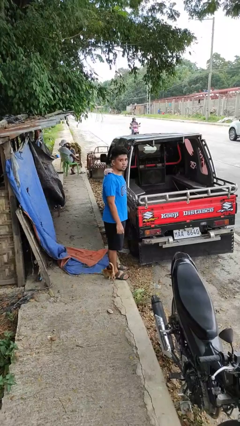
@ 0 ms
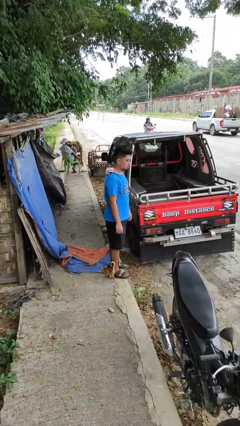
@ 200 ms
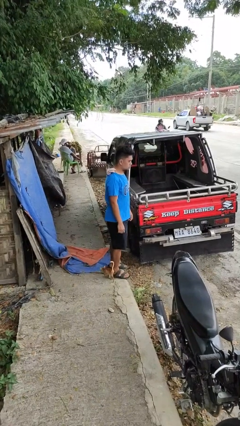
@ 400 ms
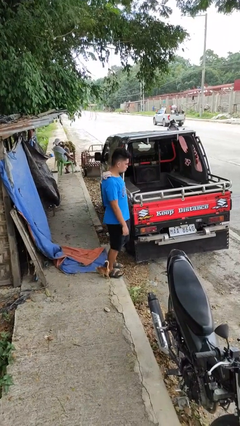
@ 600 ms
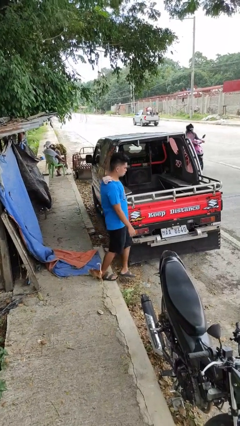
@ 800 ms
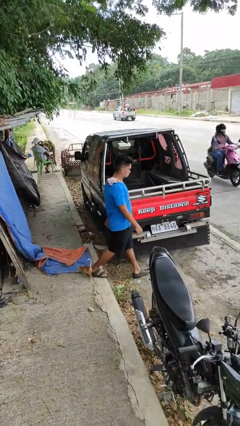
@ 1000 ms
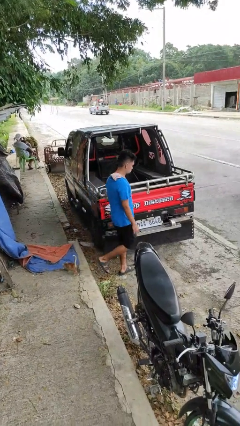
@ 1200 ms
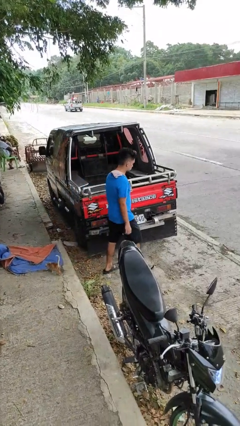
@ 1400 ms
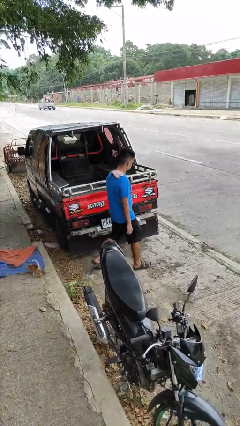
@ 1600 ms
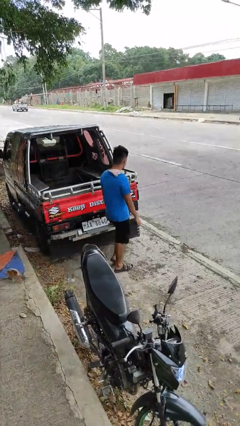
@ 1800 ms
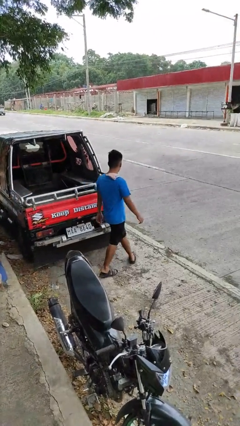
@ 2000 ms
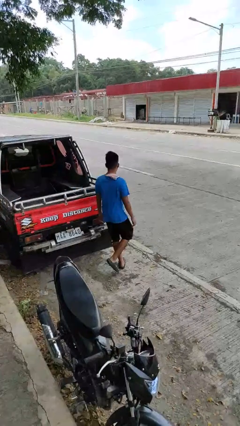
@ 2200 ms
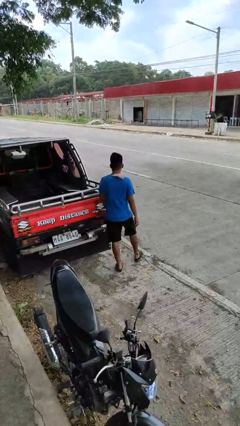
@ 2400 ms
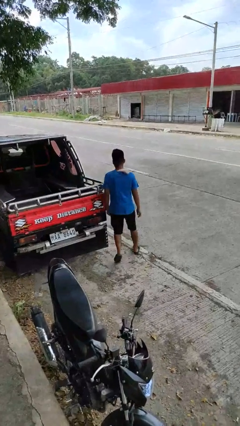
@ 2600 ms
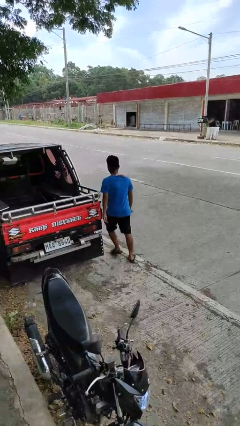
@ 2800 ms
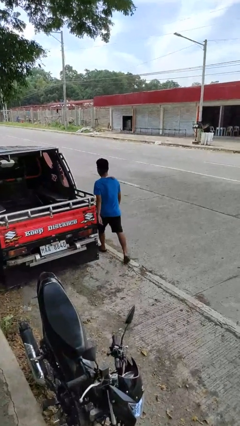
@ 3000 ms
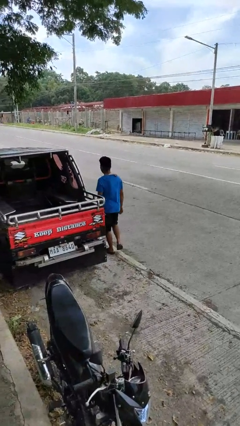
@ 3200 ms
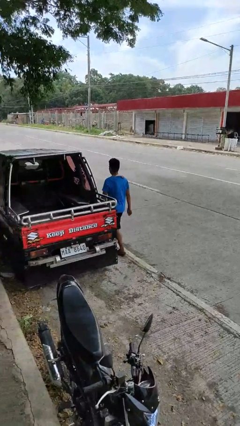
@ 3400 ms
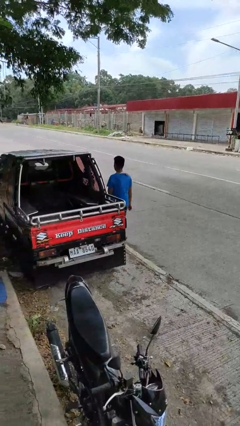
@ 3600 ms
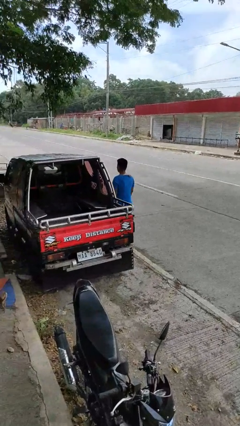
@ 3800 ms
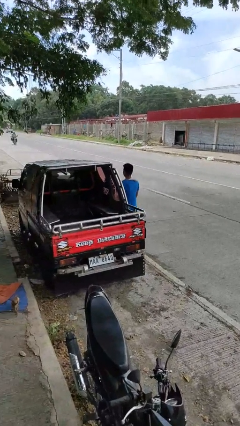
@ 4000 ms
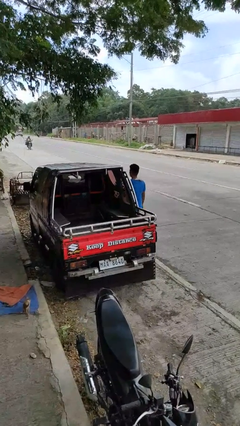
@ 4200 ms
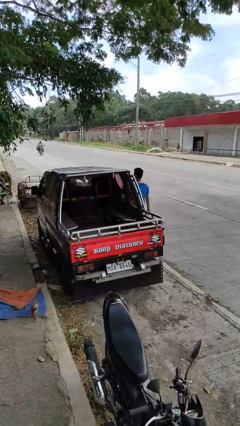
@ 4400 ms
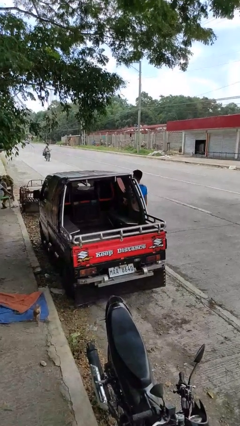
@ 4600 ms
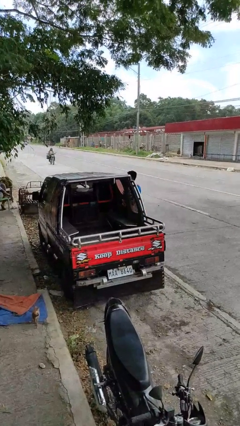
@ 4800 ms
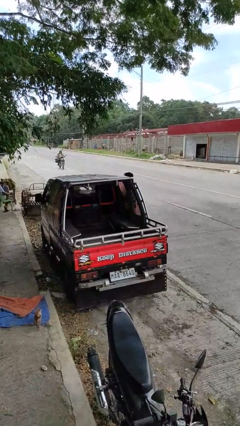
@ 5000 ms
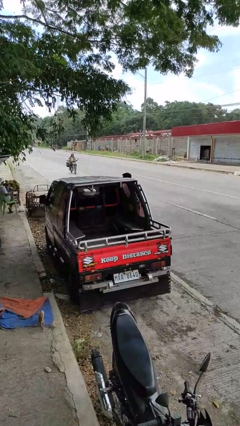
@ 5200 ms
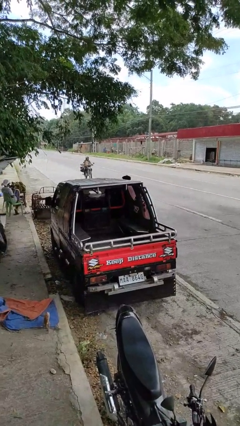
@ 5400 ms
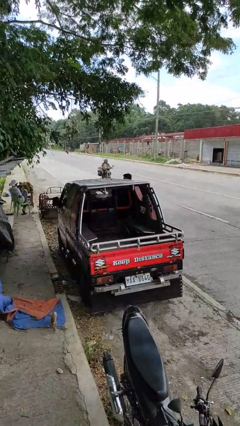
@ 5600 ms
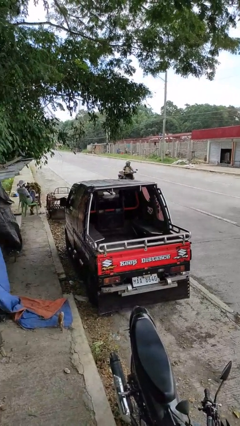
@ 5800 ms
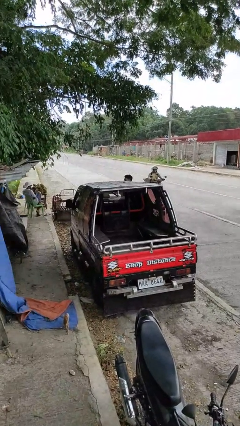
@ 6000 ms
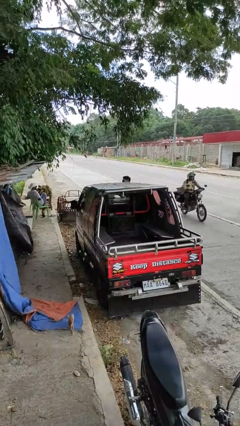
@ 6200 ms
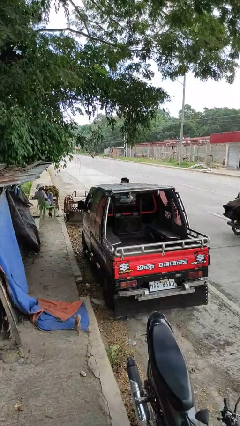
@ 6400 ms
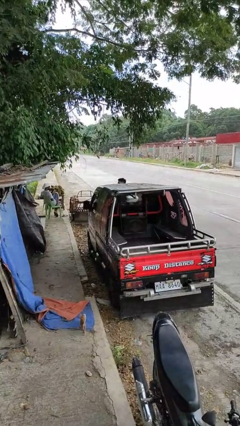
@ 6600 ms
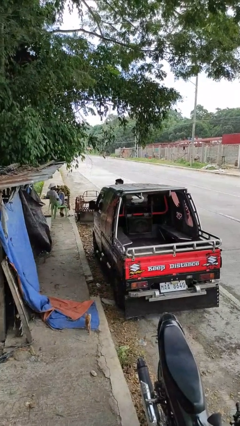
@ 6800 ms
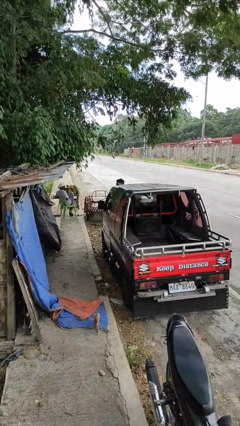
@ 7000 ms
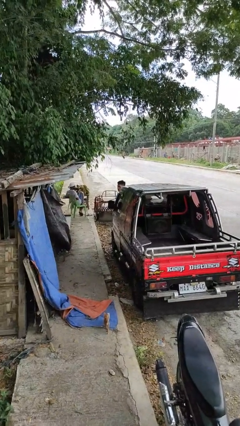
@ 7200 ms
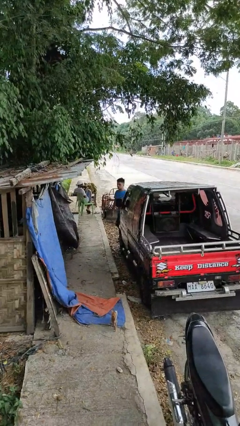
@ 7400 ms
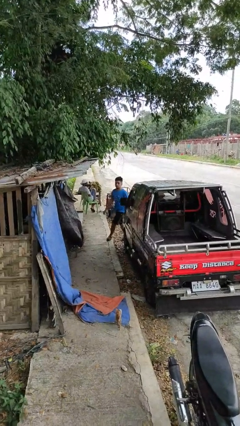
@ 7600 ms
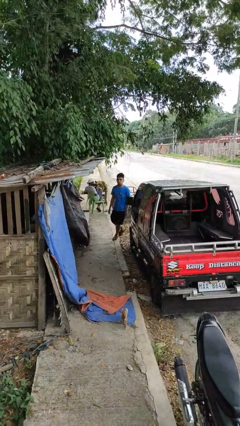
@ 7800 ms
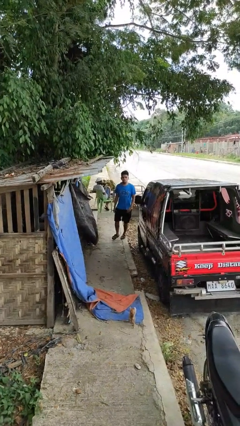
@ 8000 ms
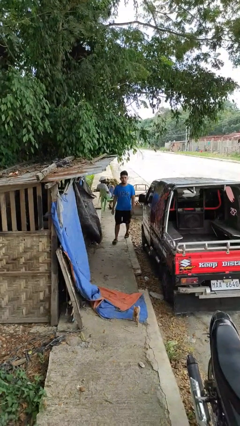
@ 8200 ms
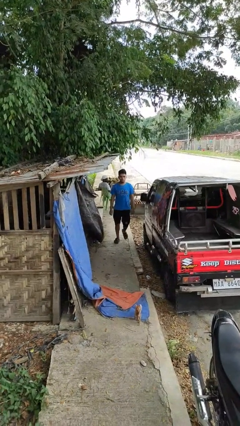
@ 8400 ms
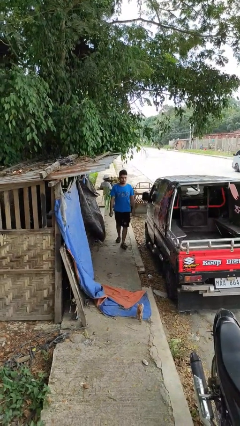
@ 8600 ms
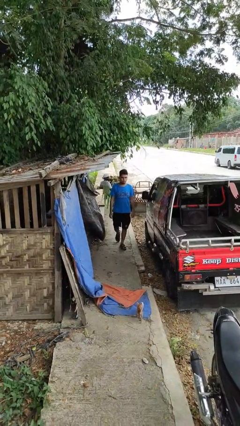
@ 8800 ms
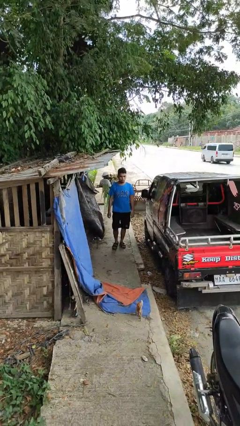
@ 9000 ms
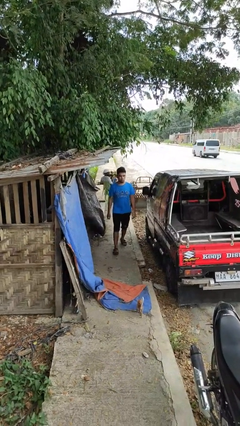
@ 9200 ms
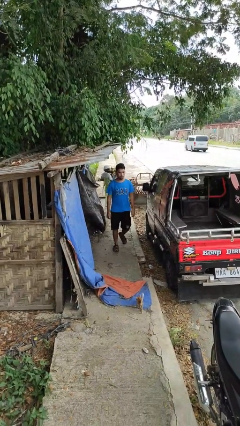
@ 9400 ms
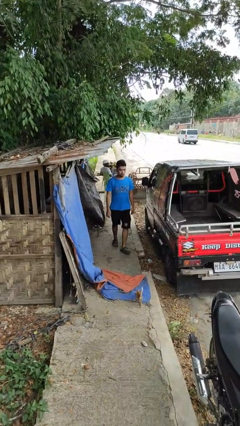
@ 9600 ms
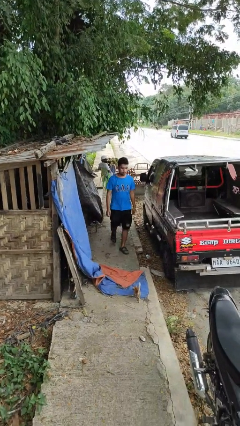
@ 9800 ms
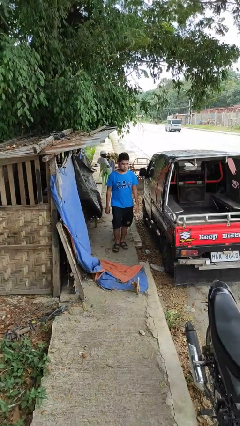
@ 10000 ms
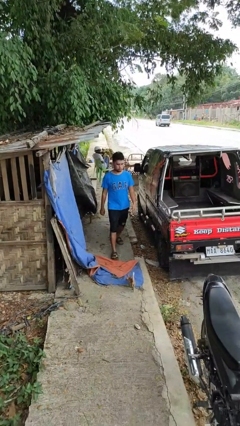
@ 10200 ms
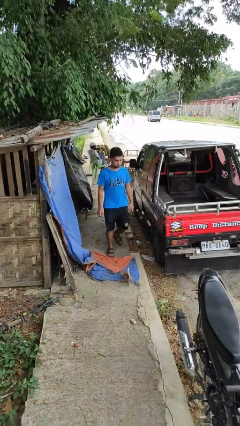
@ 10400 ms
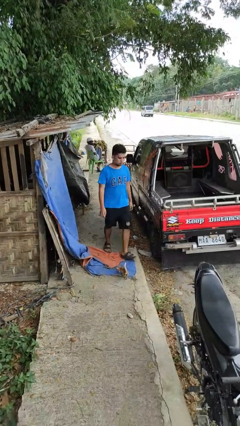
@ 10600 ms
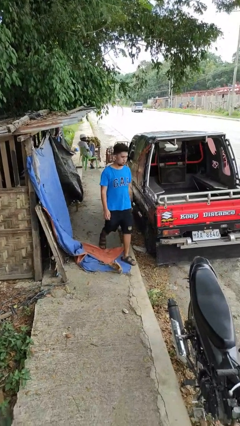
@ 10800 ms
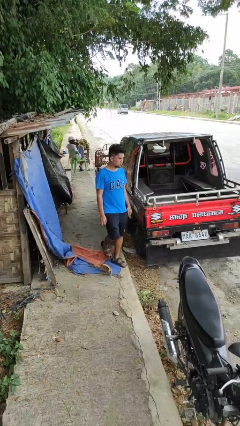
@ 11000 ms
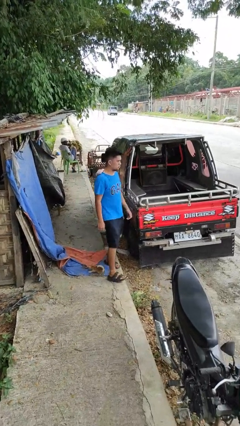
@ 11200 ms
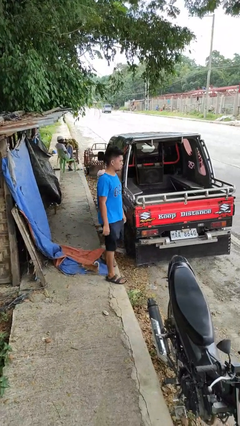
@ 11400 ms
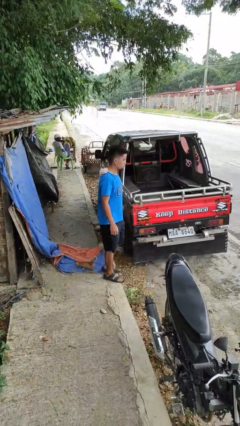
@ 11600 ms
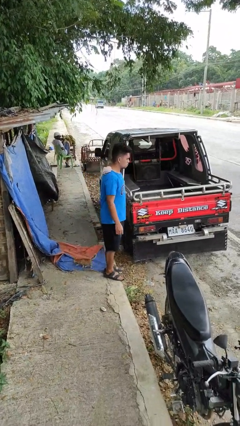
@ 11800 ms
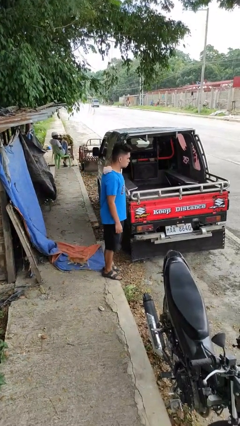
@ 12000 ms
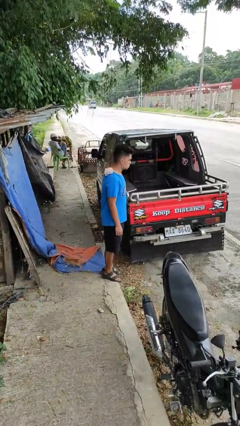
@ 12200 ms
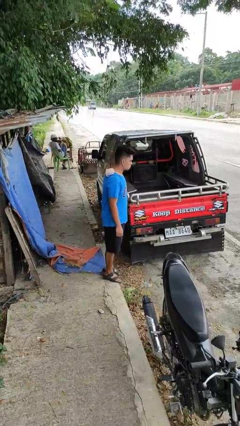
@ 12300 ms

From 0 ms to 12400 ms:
person walks around car

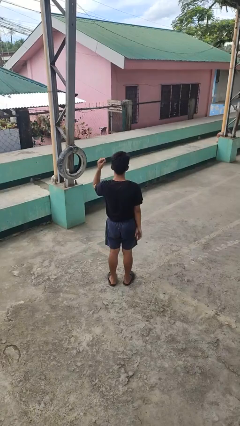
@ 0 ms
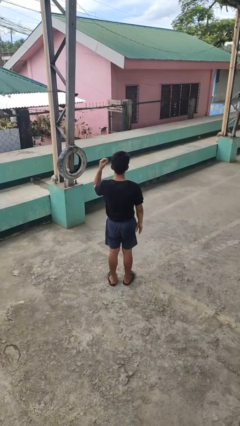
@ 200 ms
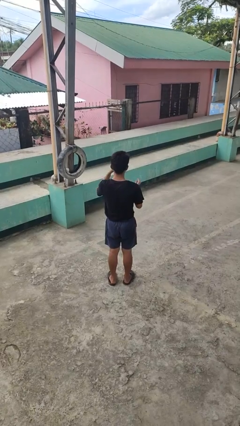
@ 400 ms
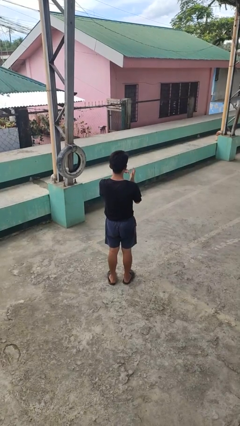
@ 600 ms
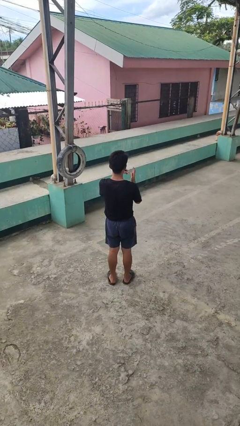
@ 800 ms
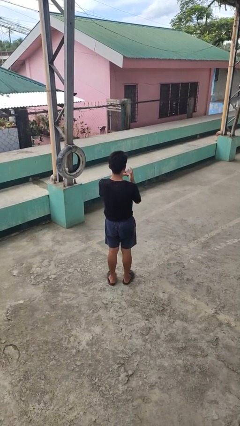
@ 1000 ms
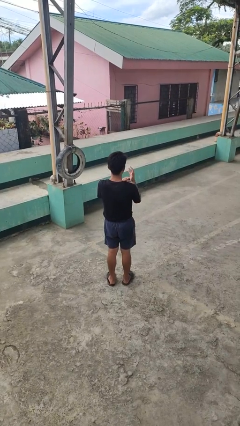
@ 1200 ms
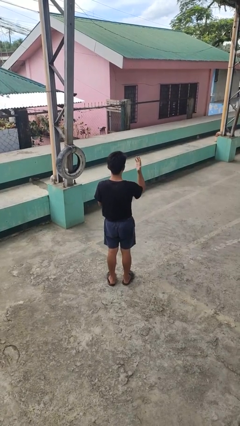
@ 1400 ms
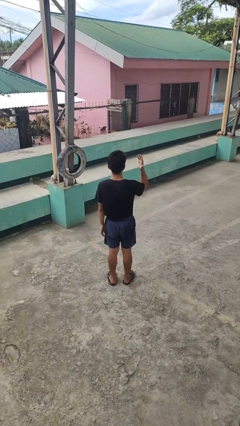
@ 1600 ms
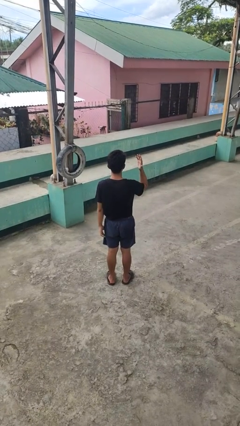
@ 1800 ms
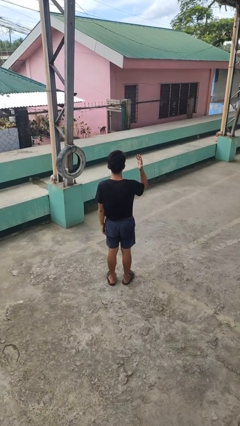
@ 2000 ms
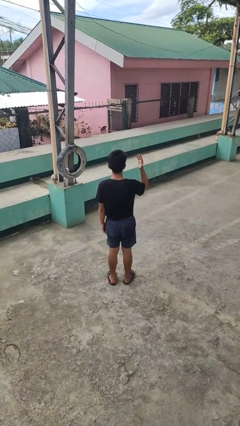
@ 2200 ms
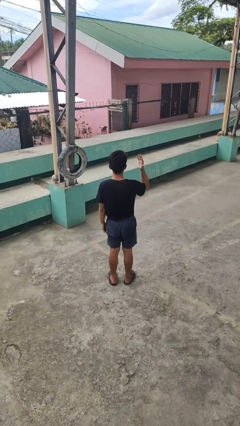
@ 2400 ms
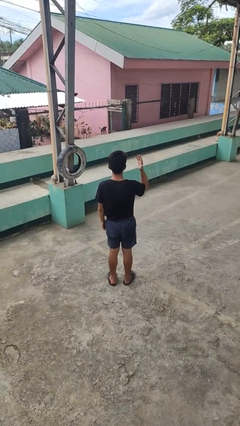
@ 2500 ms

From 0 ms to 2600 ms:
person puts on ring

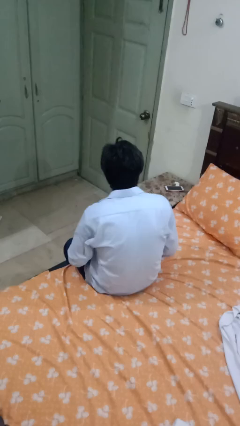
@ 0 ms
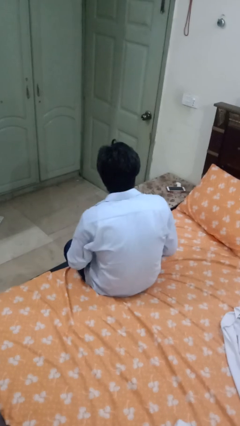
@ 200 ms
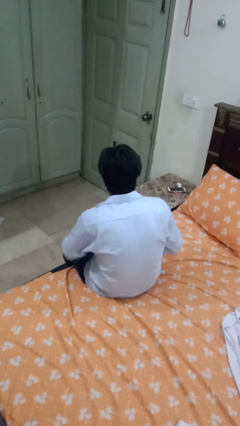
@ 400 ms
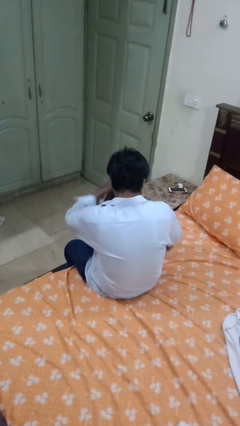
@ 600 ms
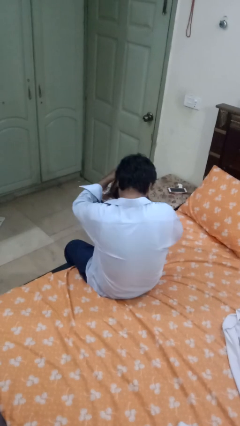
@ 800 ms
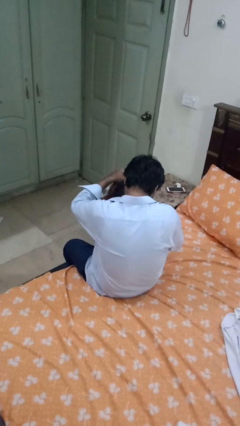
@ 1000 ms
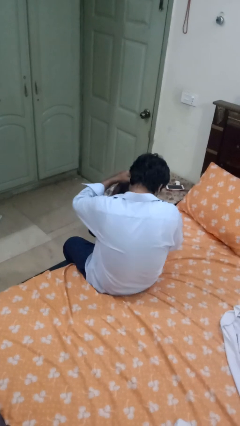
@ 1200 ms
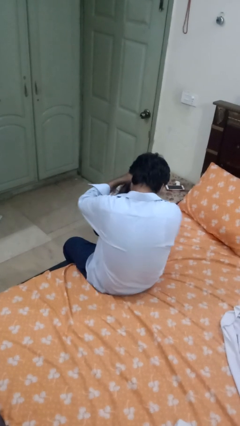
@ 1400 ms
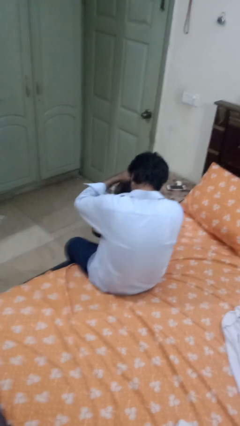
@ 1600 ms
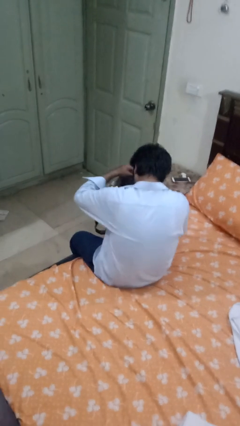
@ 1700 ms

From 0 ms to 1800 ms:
person searches in bag

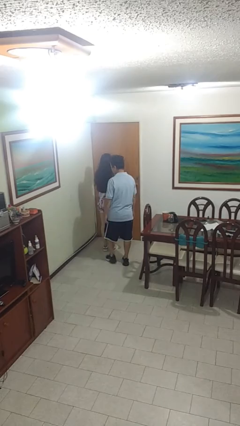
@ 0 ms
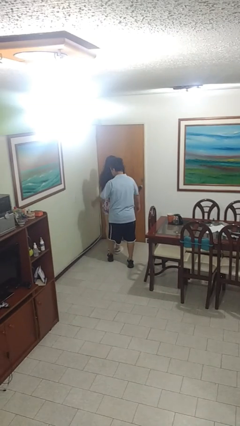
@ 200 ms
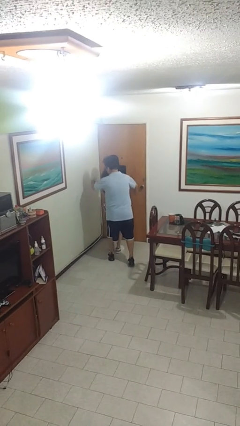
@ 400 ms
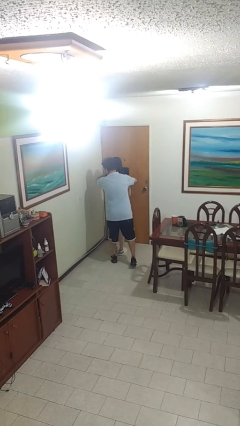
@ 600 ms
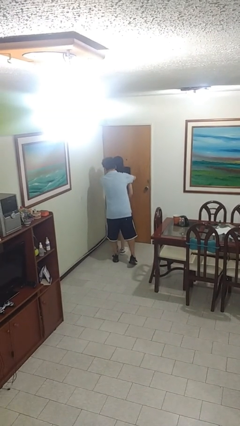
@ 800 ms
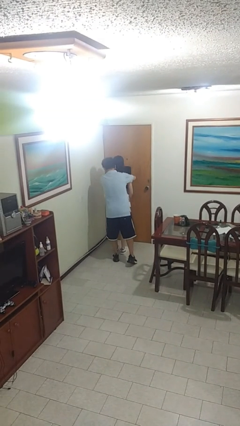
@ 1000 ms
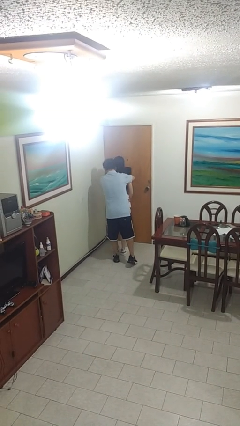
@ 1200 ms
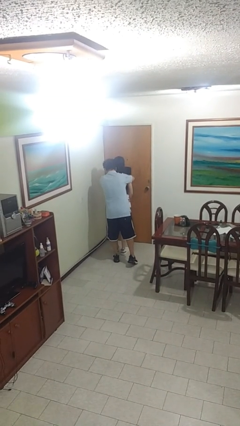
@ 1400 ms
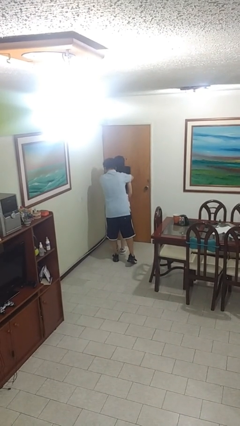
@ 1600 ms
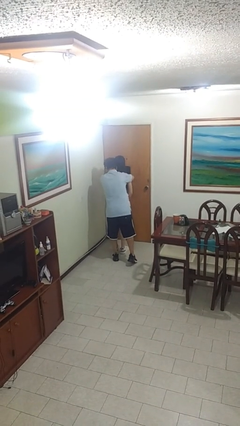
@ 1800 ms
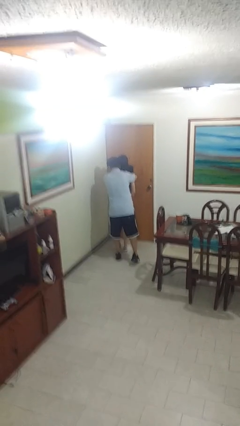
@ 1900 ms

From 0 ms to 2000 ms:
person hugs person from behind
